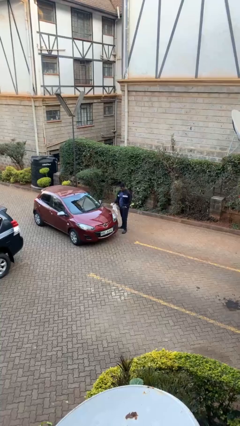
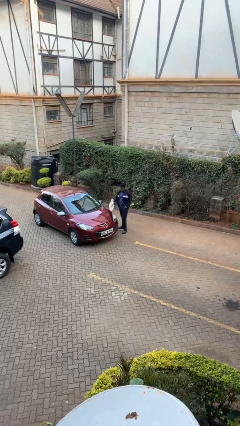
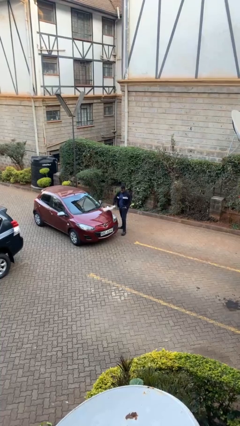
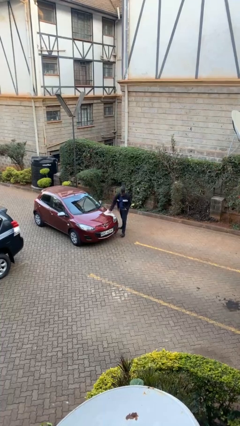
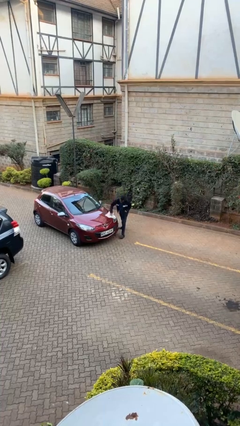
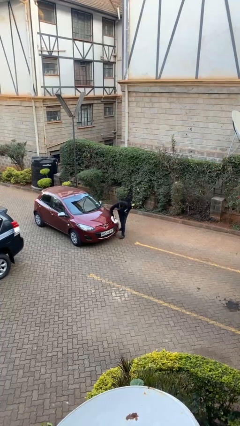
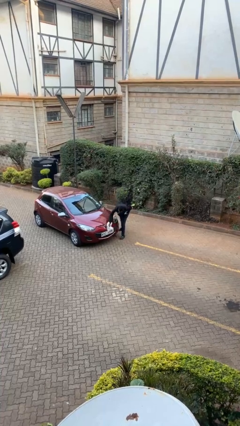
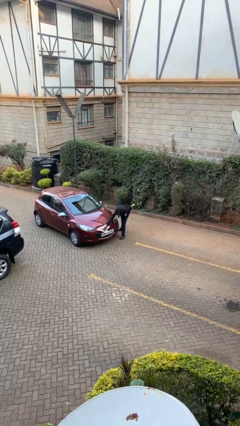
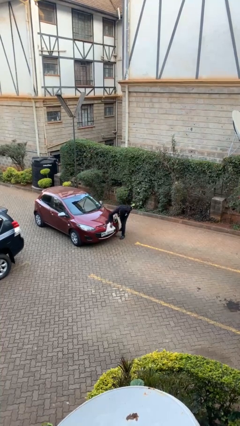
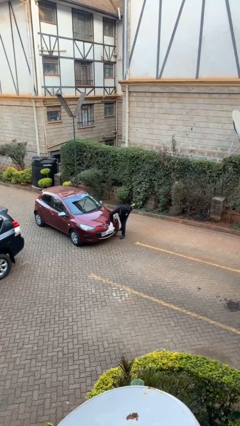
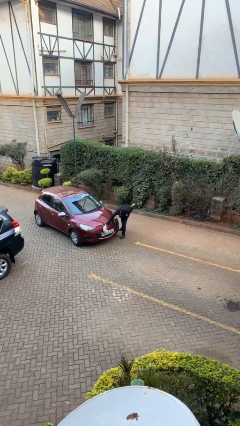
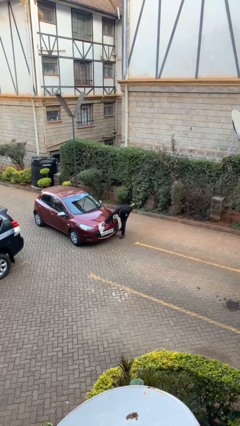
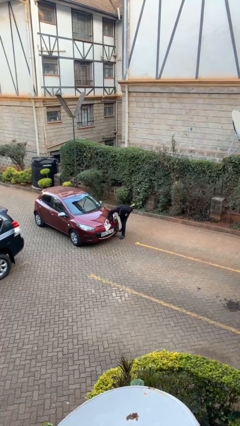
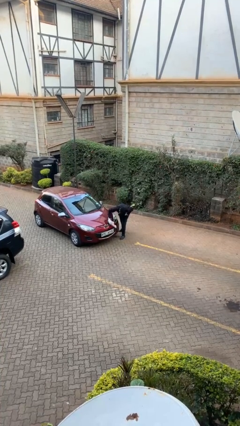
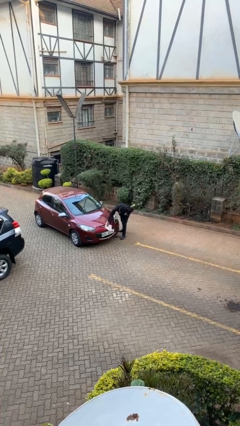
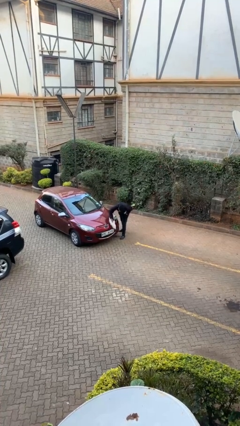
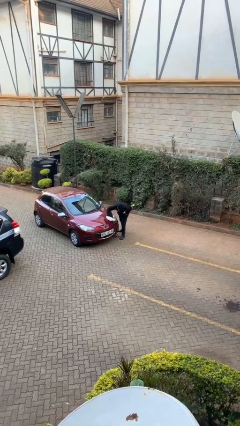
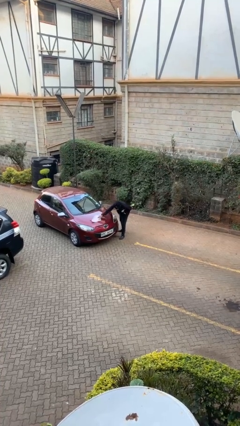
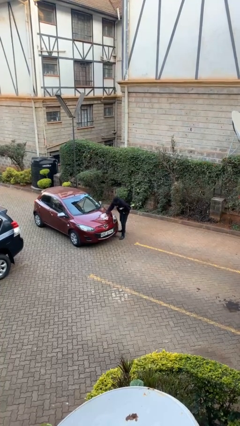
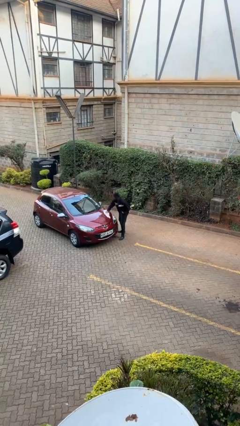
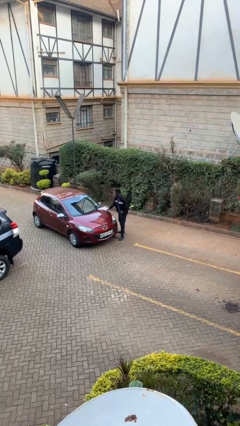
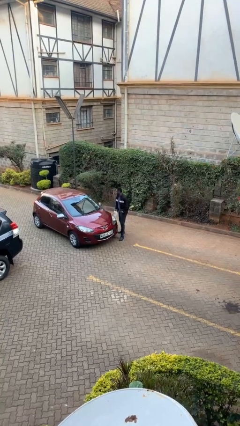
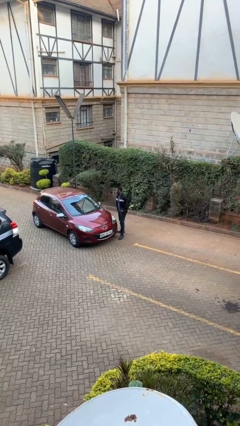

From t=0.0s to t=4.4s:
person polishes car with rag

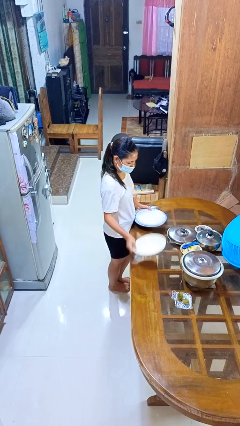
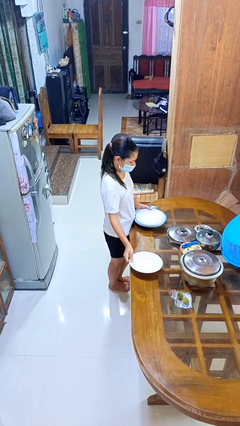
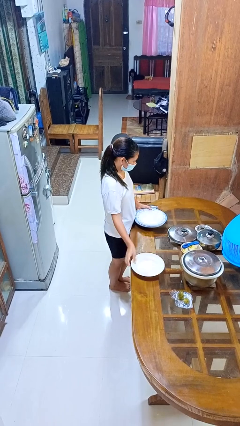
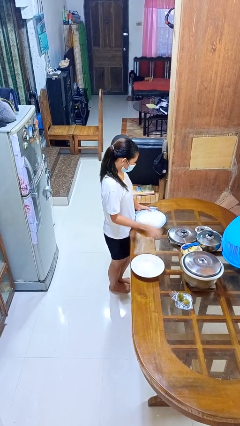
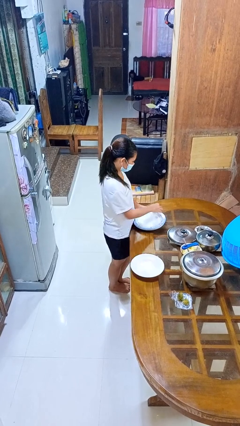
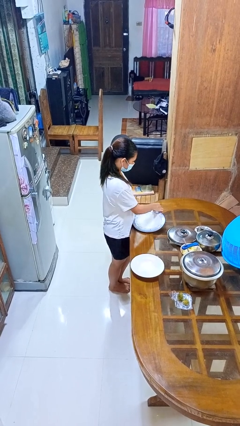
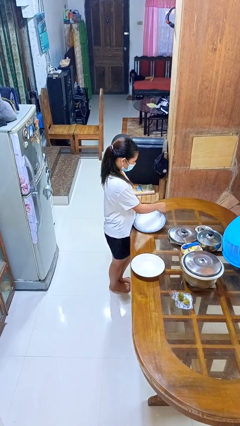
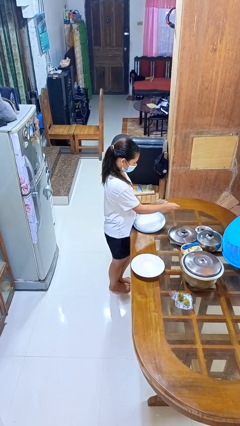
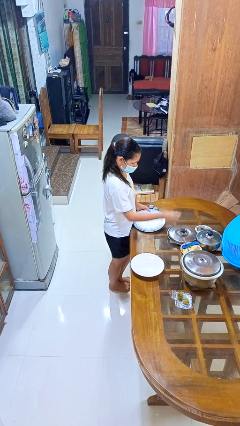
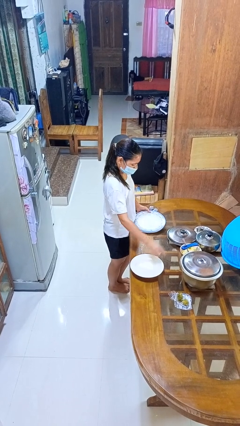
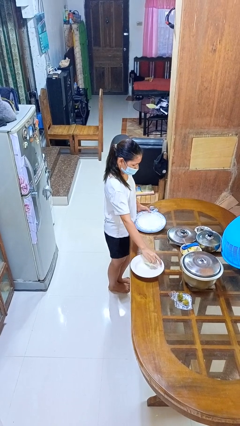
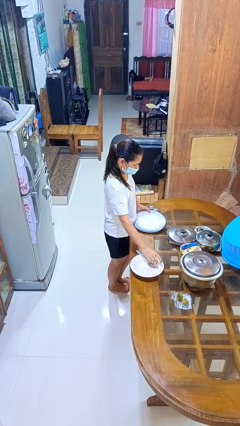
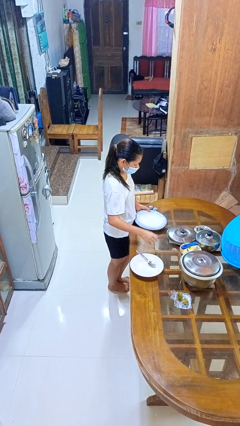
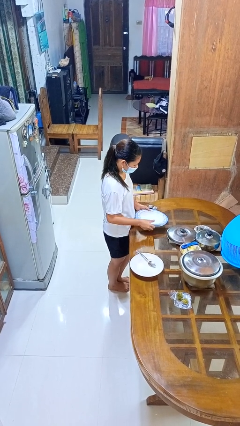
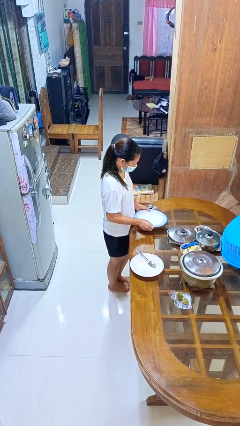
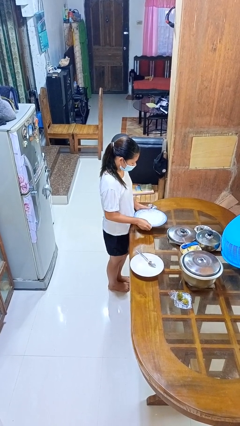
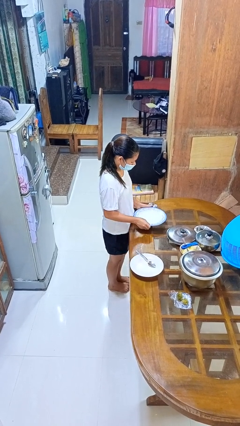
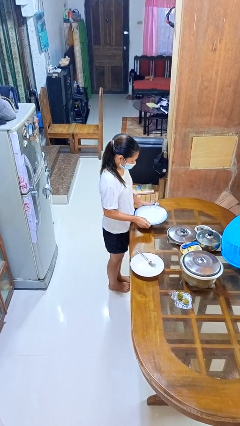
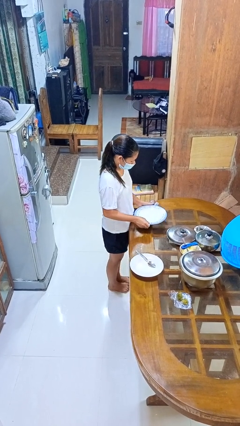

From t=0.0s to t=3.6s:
person sets table

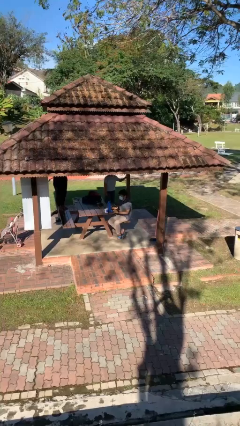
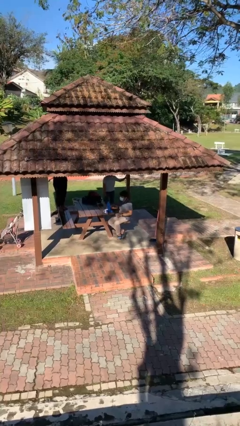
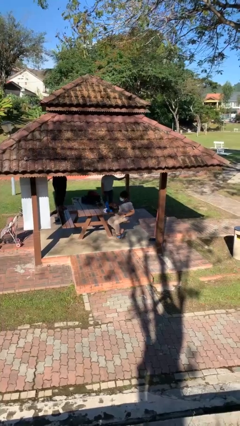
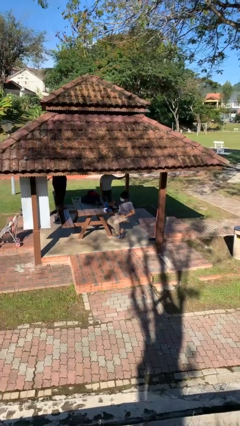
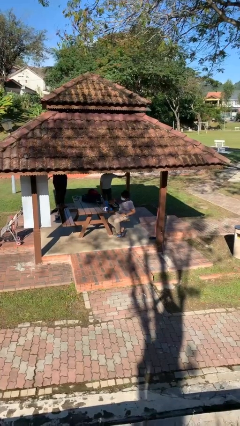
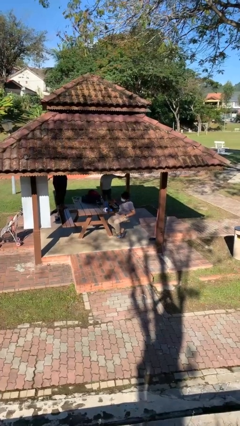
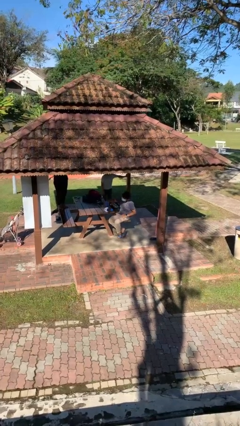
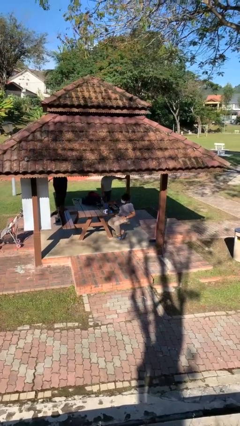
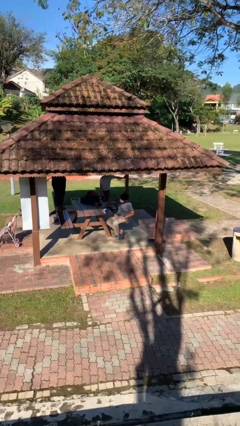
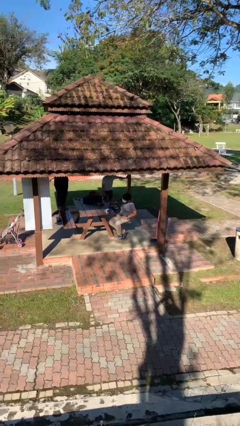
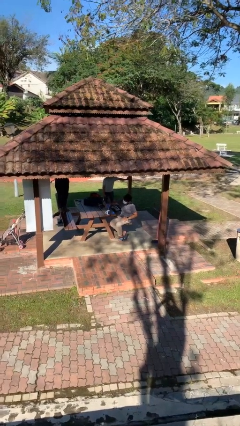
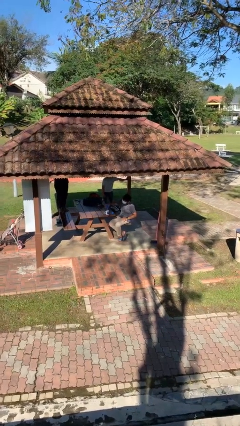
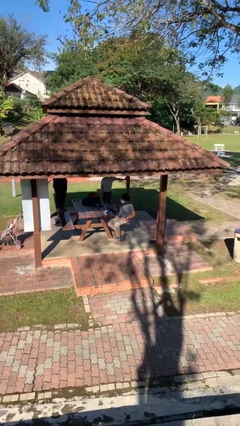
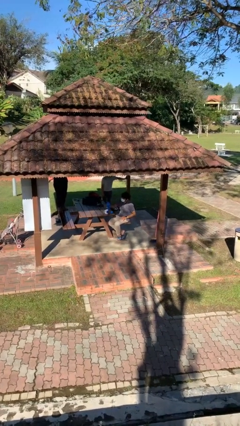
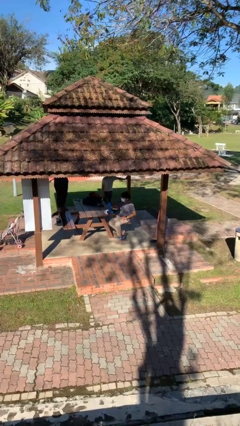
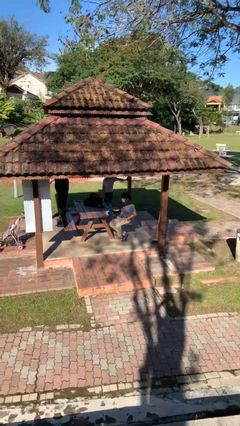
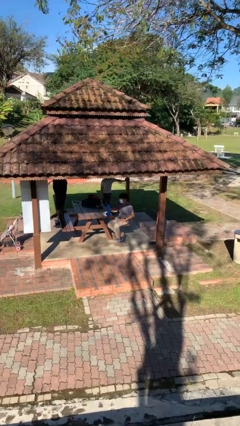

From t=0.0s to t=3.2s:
person pours liquid into cup

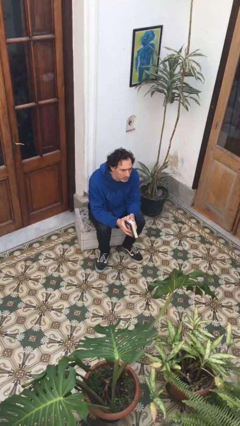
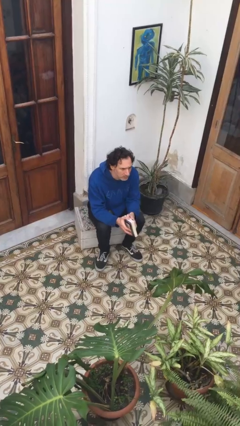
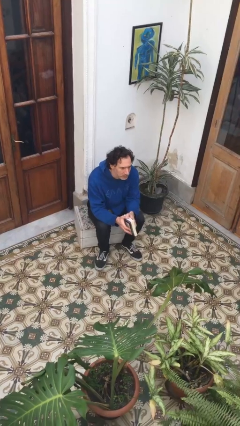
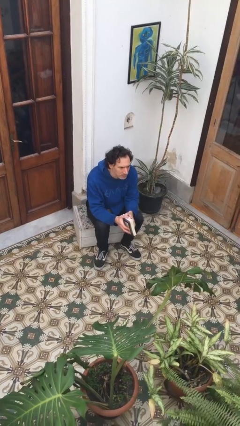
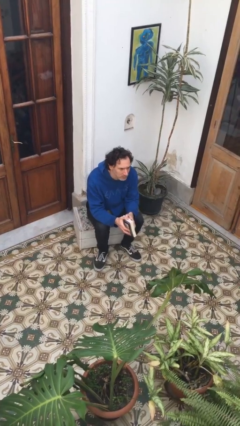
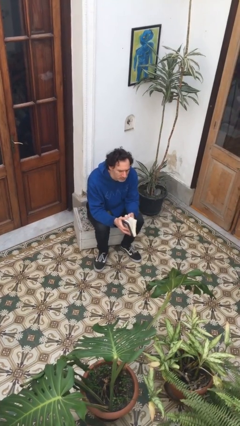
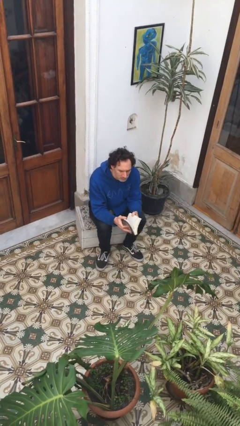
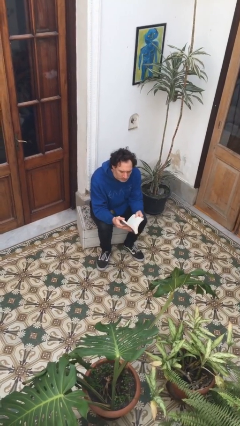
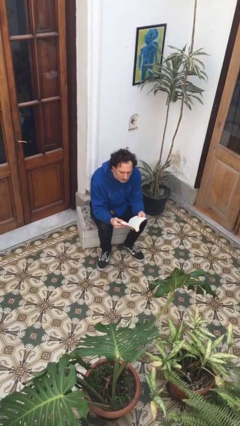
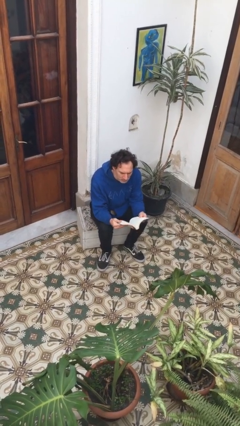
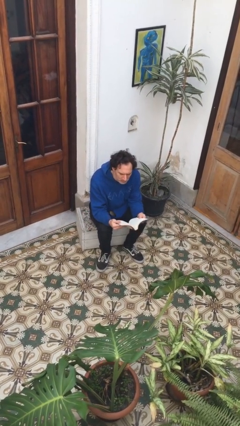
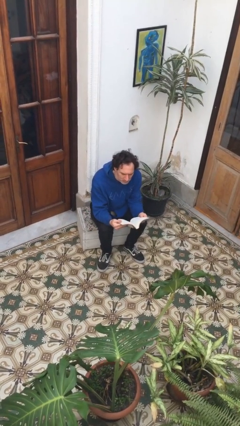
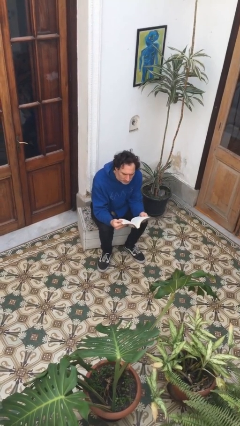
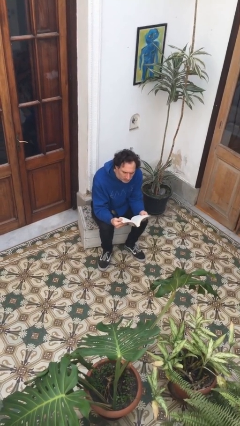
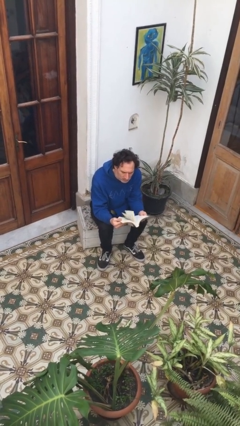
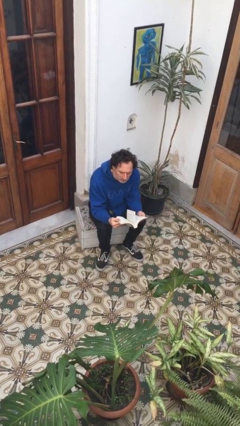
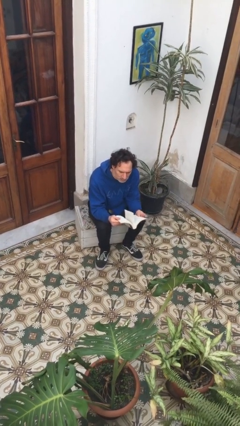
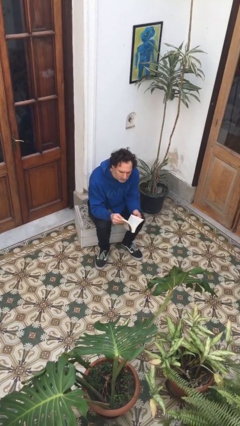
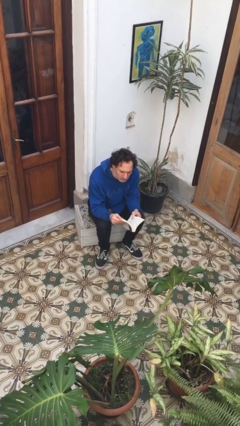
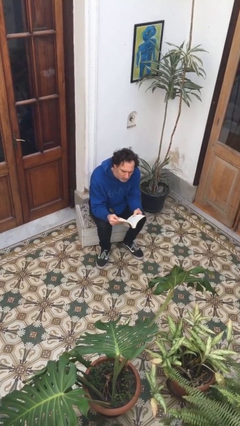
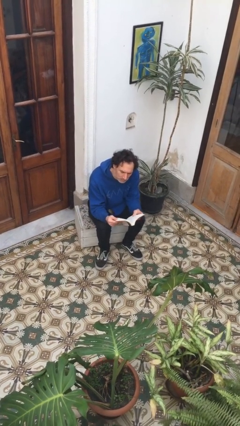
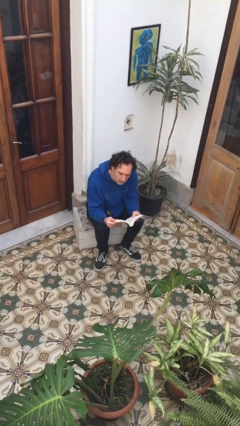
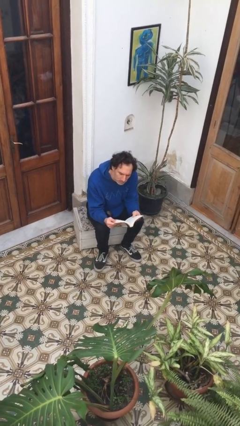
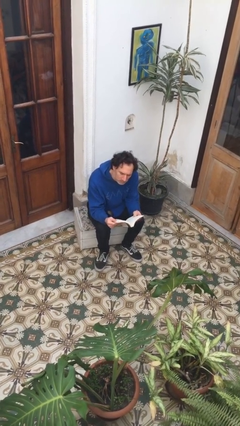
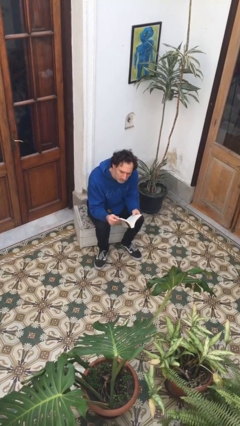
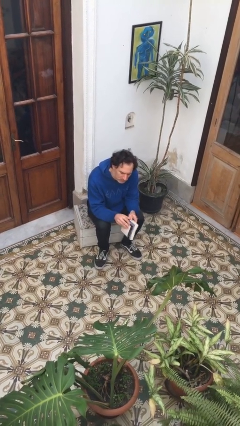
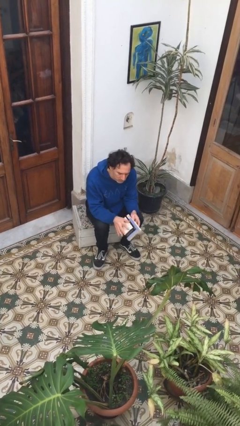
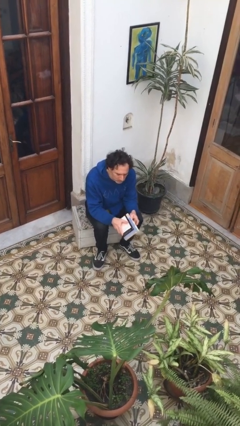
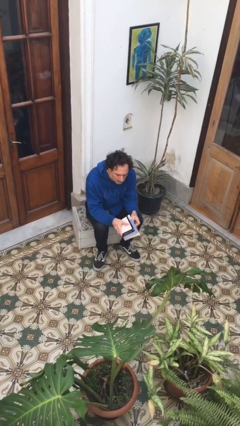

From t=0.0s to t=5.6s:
person reads book

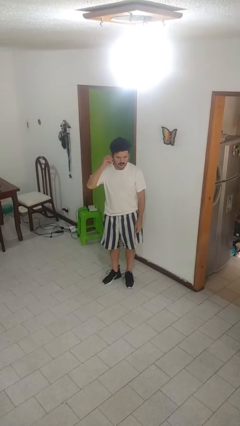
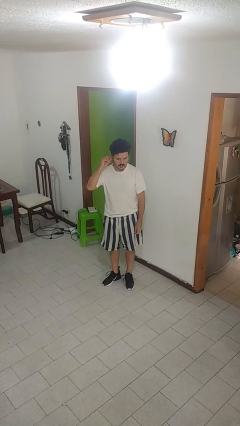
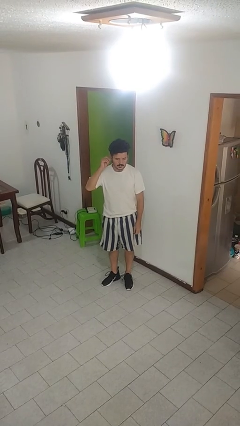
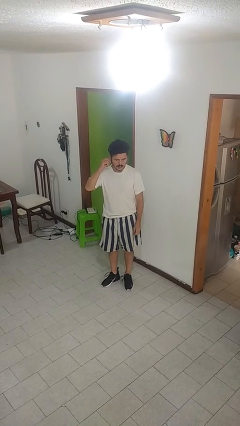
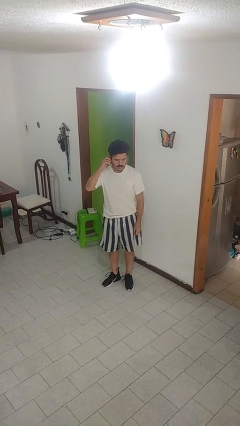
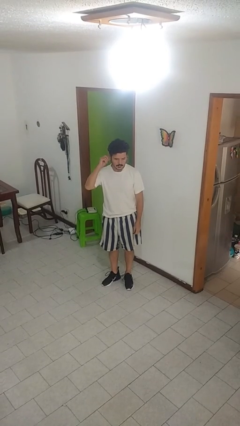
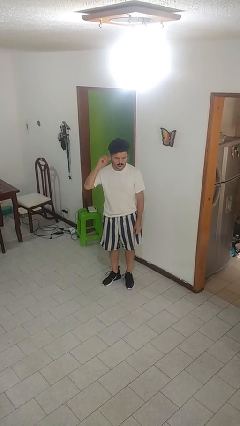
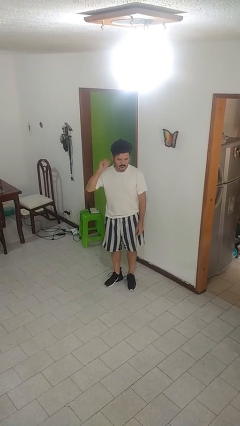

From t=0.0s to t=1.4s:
person touches earlobe
